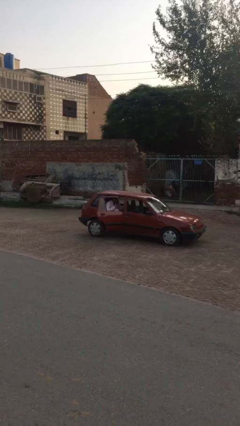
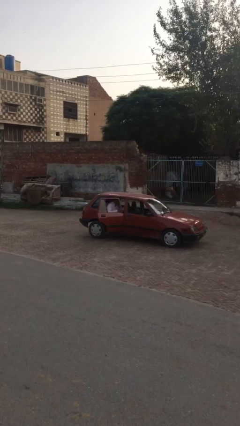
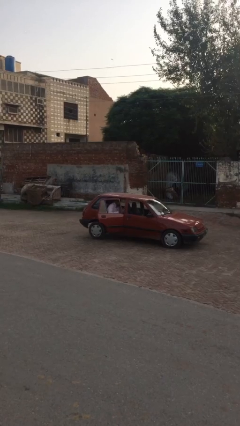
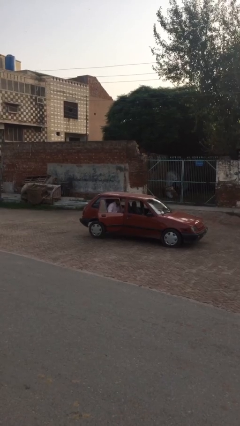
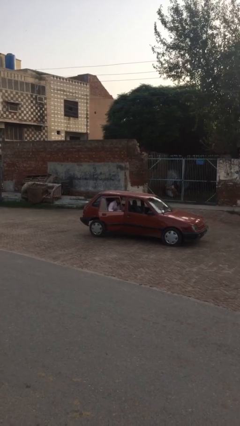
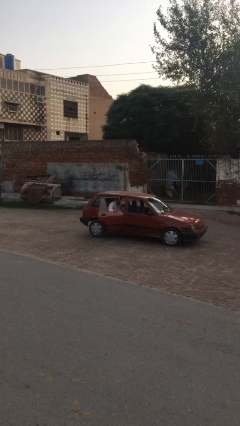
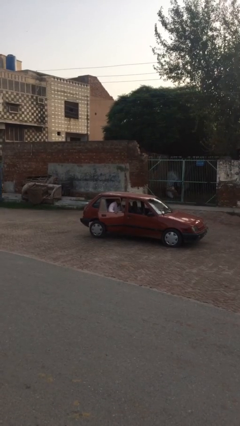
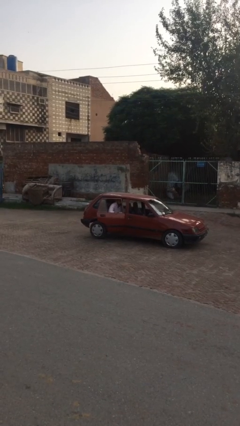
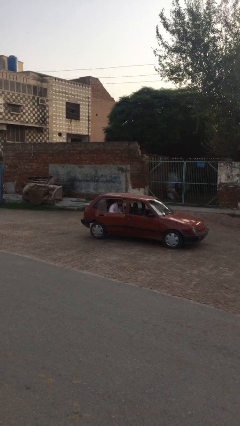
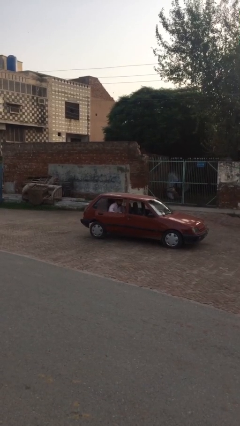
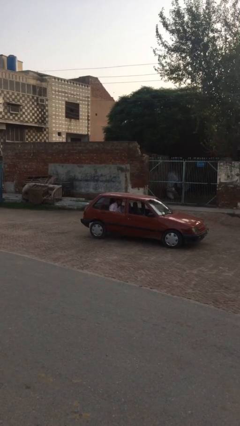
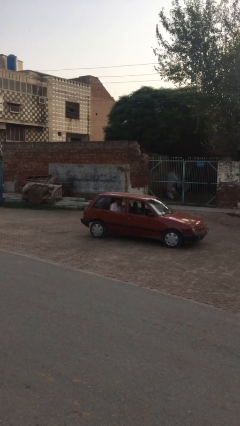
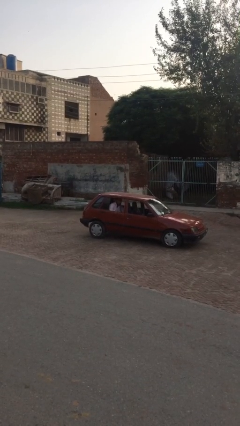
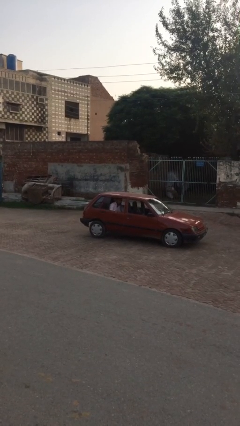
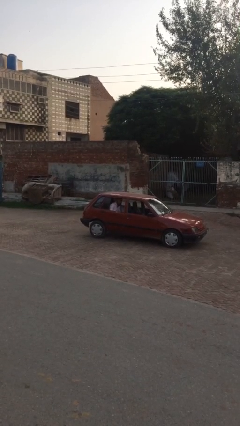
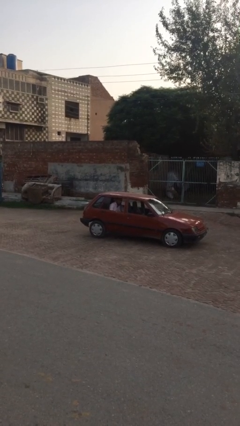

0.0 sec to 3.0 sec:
person closes car door

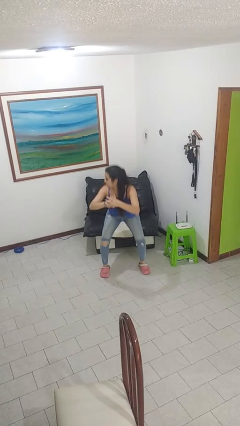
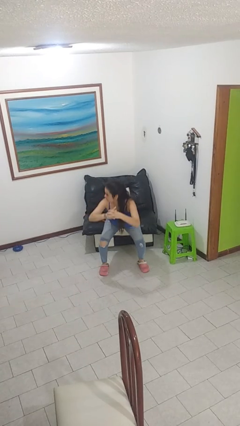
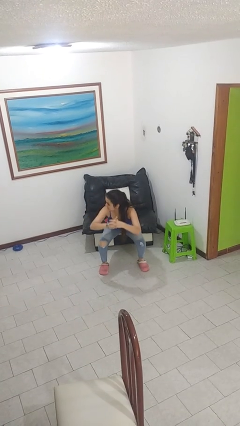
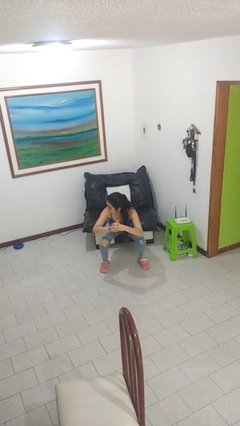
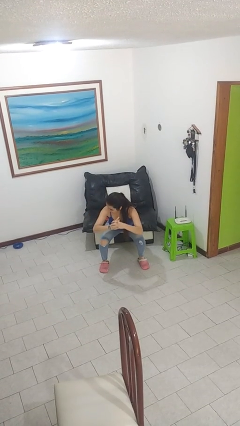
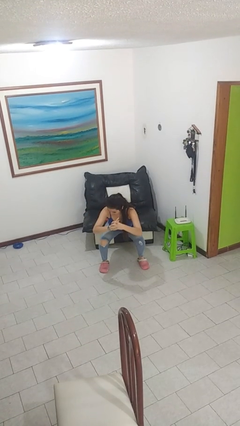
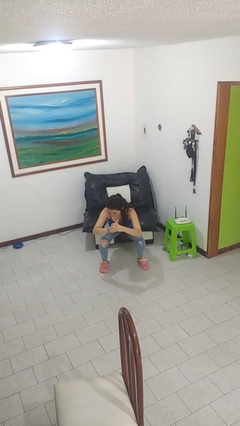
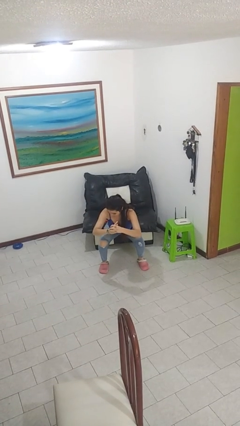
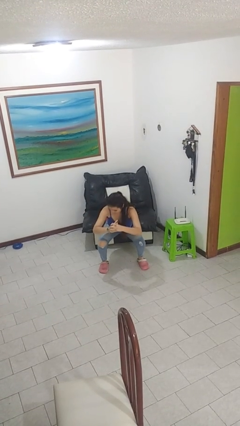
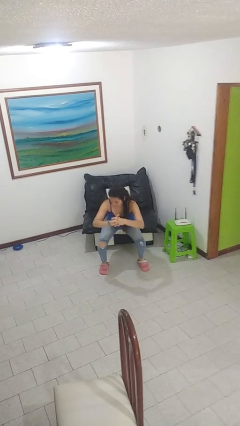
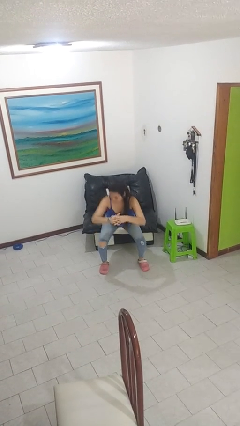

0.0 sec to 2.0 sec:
person squats

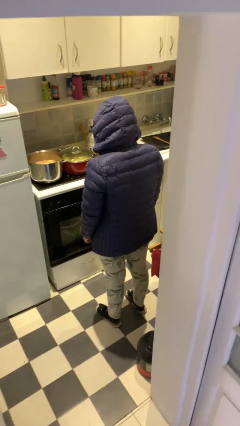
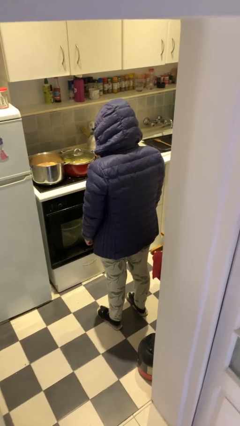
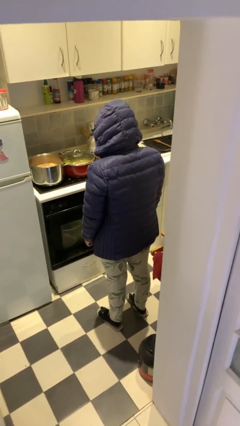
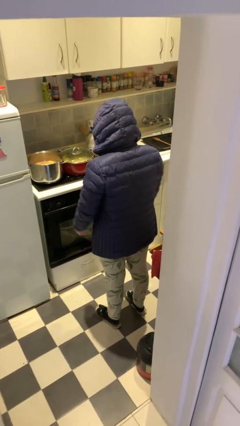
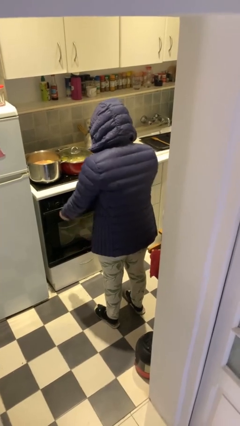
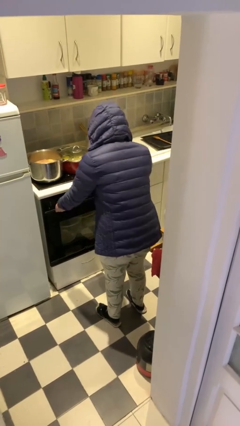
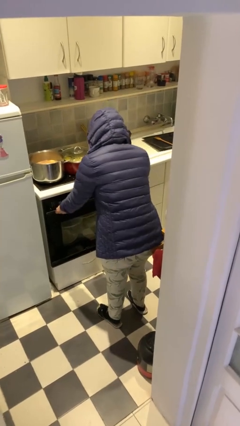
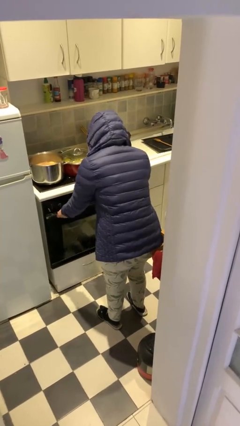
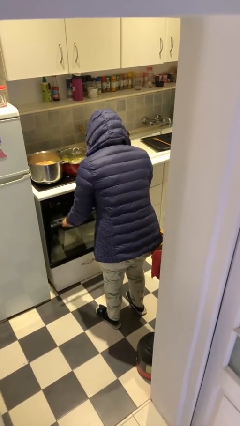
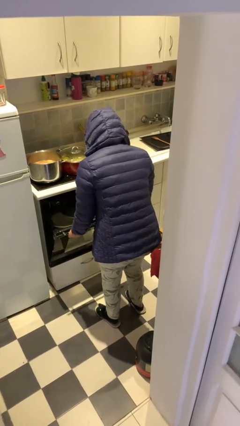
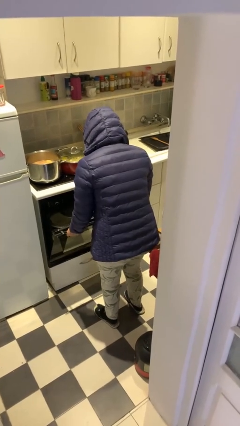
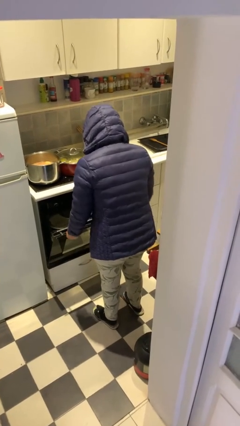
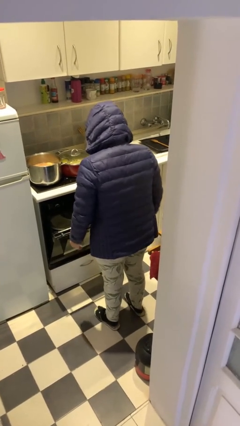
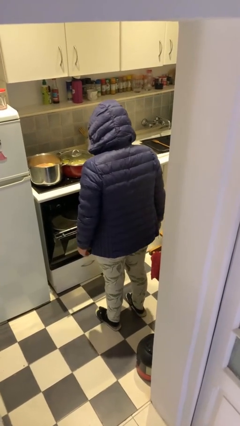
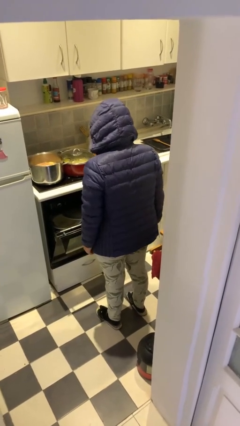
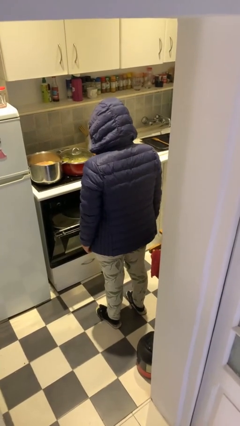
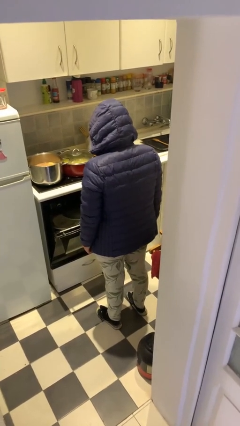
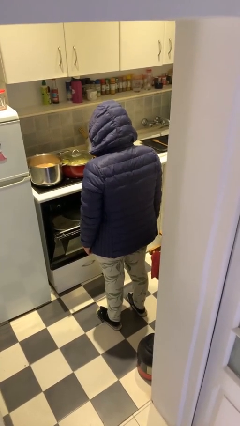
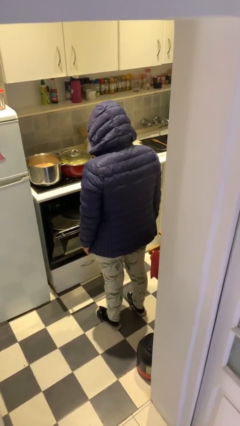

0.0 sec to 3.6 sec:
person opens dishwasher

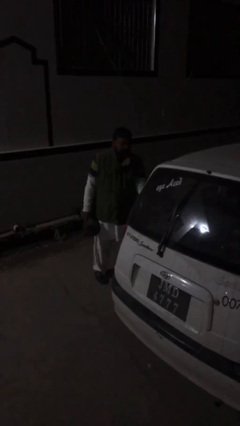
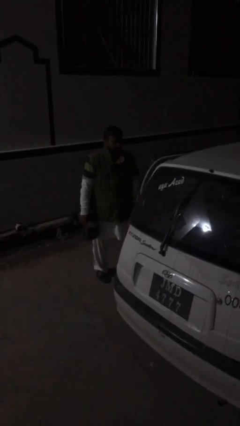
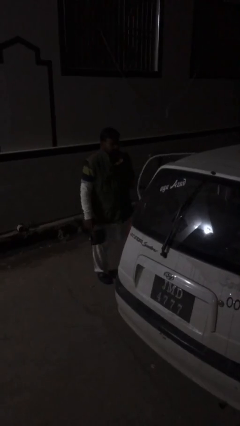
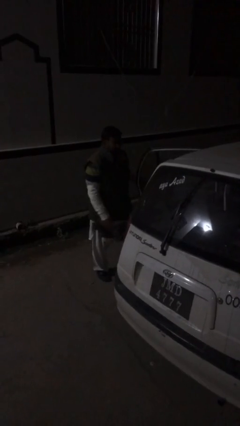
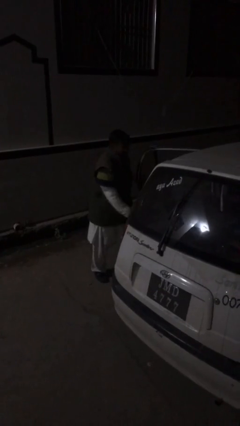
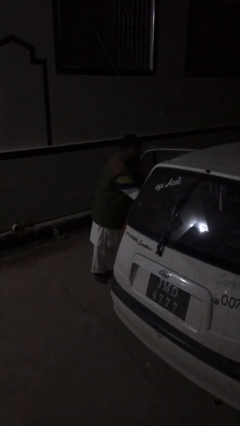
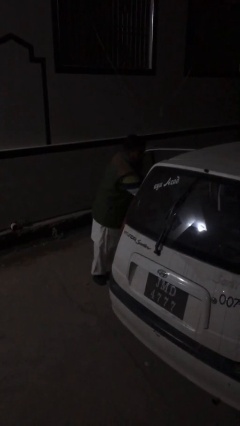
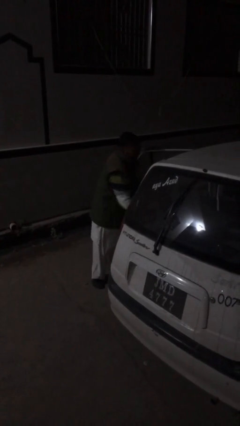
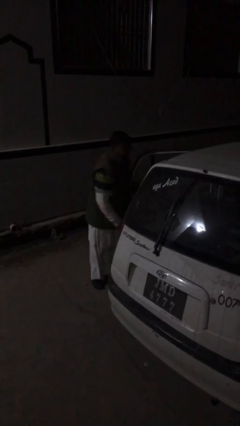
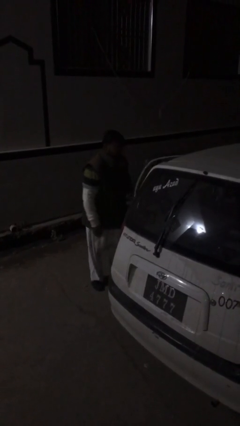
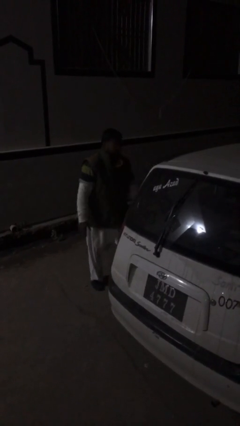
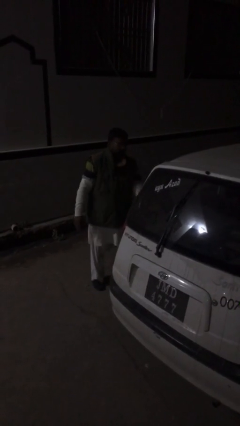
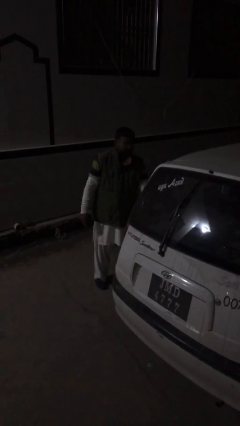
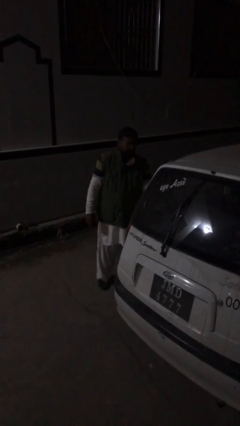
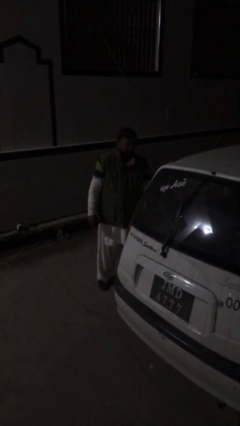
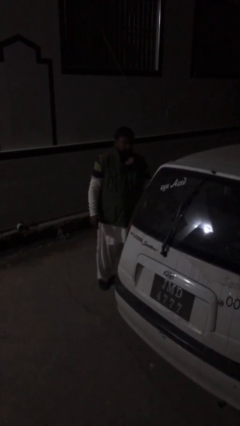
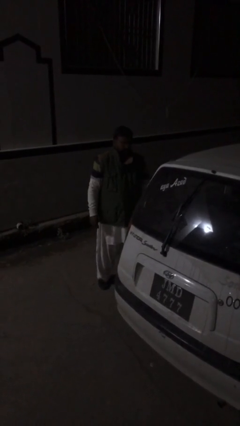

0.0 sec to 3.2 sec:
person loads car

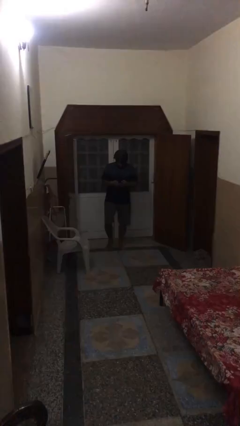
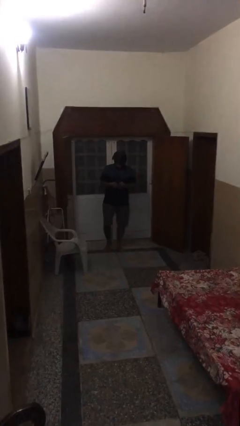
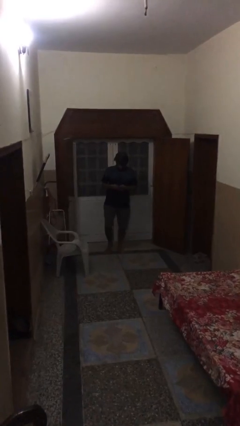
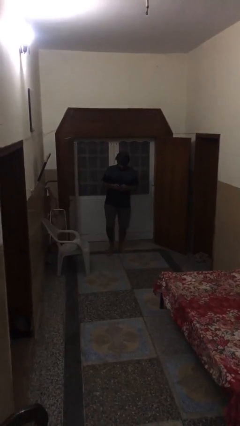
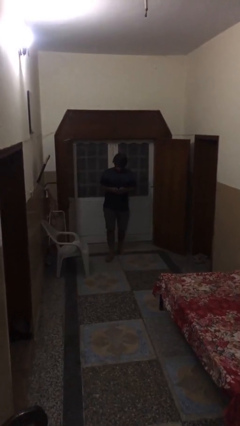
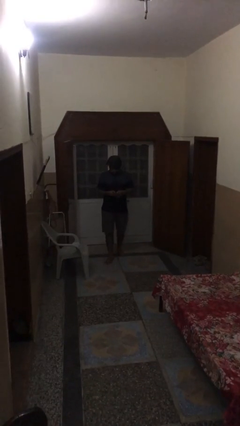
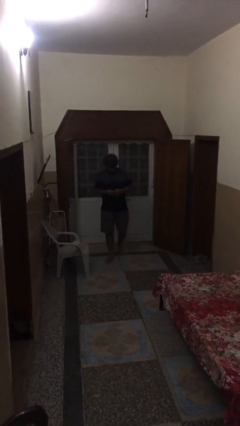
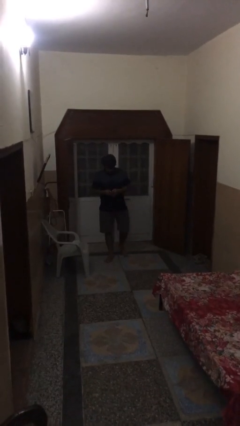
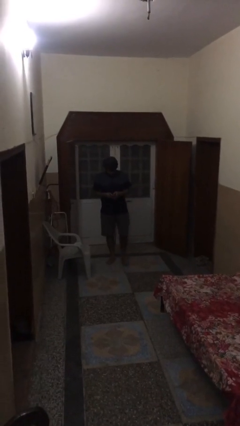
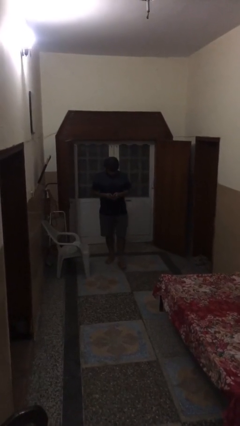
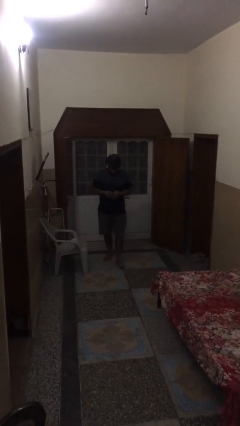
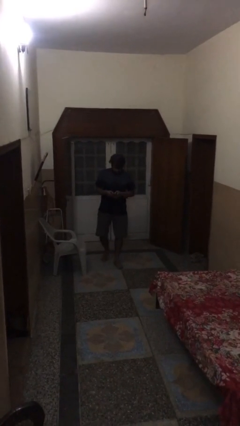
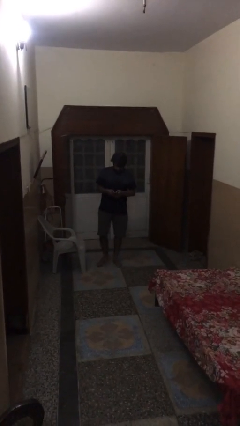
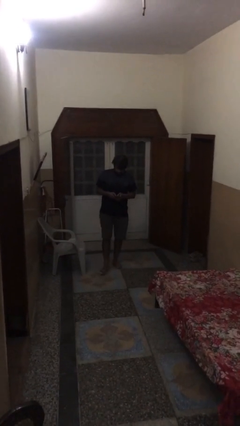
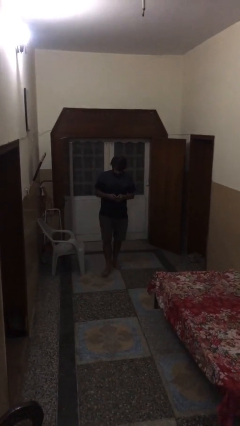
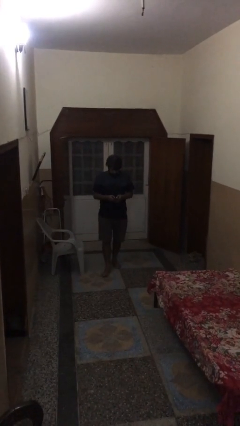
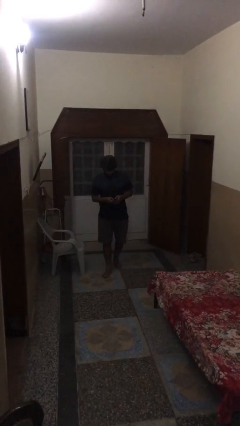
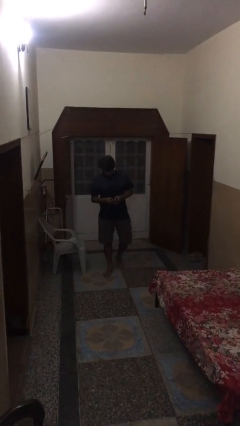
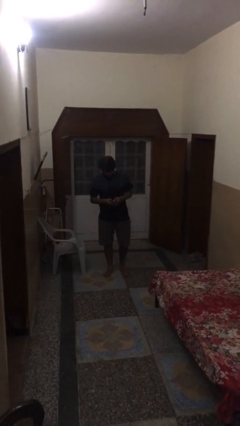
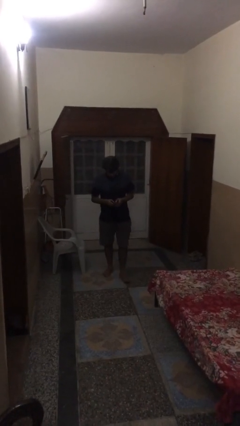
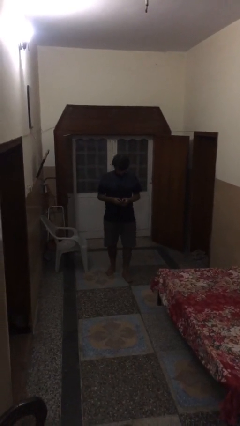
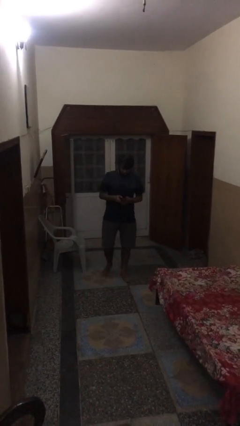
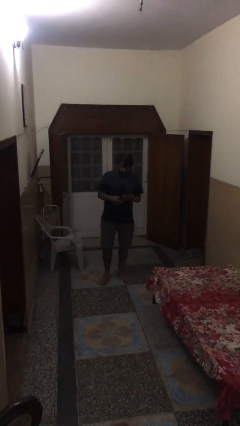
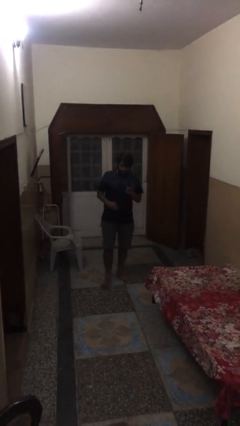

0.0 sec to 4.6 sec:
person texts on phone

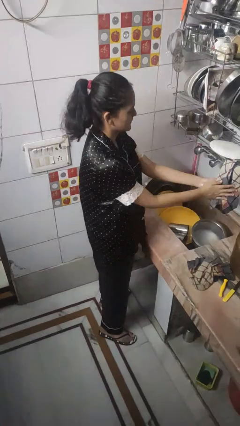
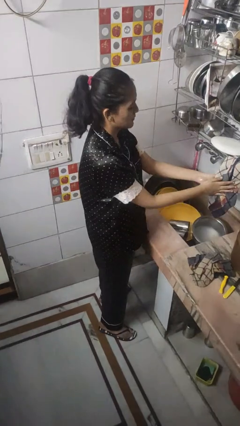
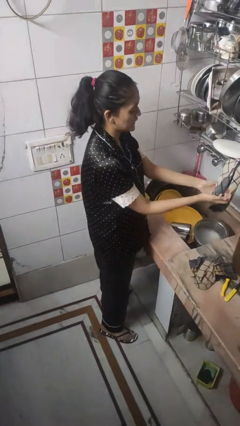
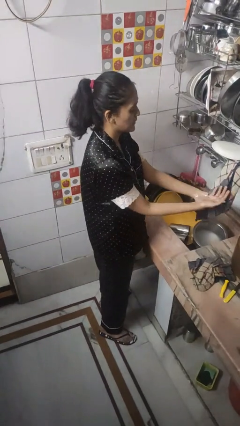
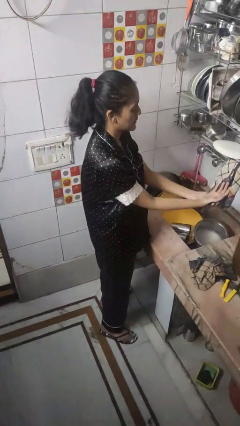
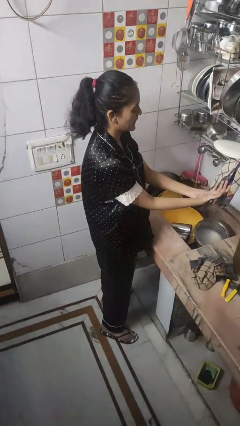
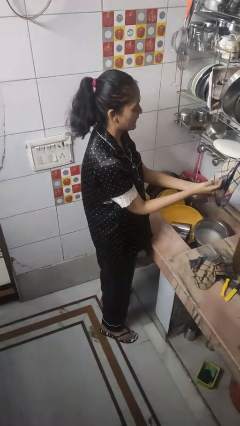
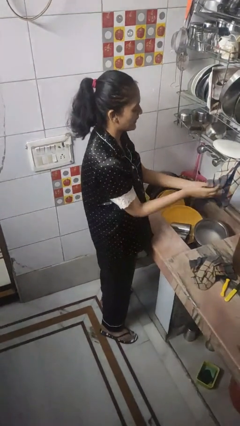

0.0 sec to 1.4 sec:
person dries hands with towel
